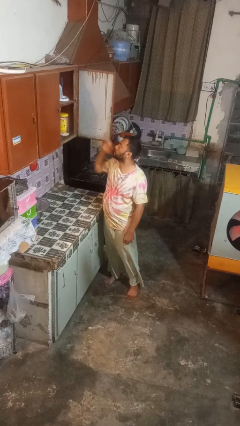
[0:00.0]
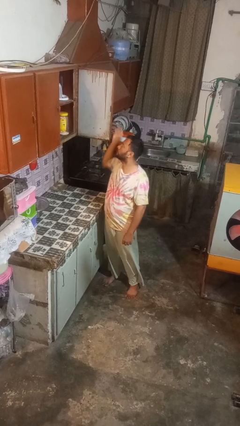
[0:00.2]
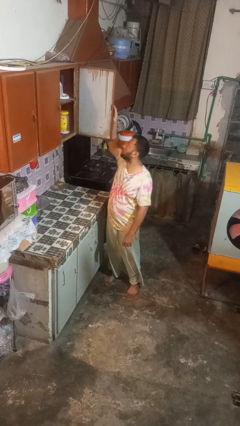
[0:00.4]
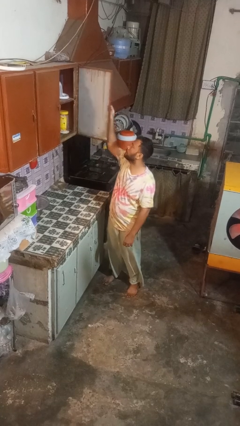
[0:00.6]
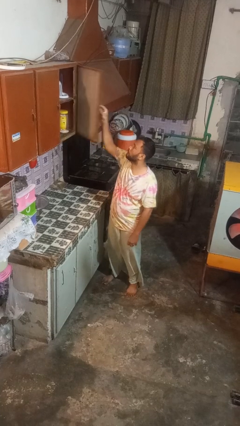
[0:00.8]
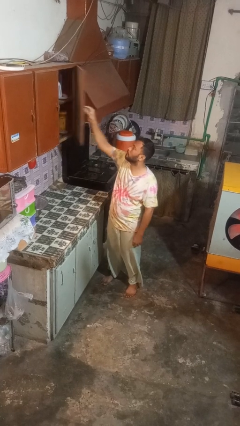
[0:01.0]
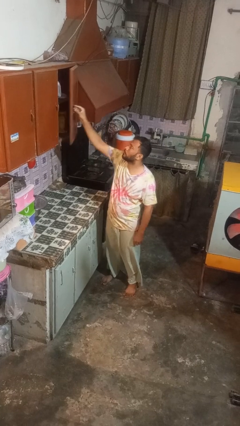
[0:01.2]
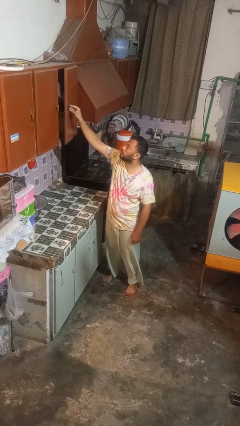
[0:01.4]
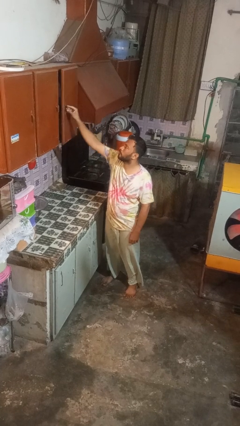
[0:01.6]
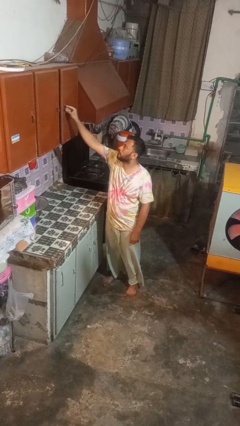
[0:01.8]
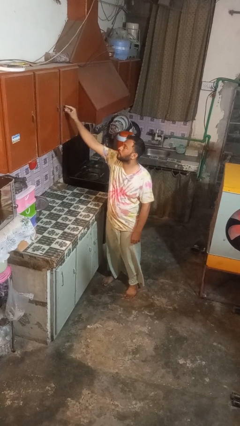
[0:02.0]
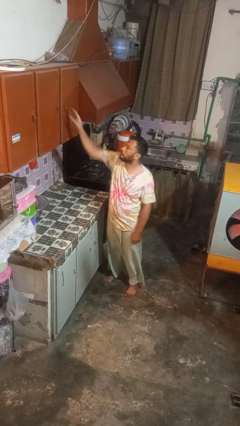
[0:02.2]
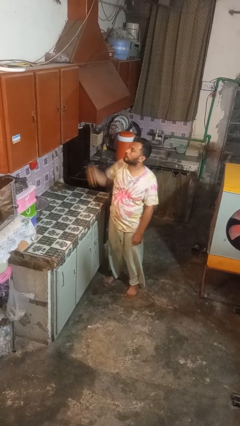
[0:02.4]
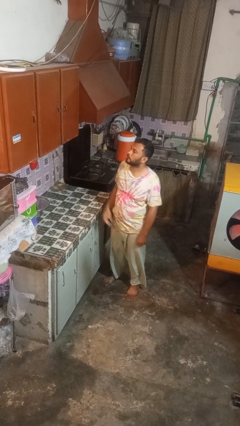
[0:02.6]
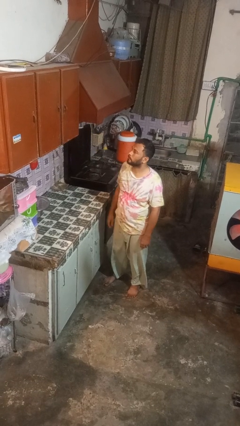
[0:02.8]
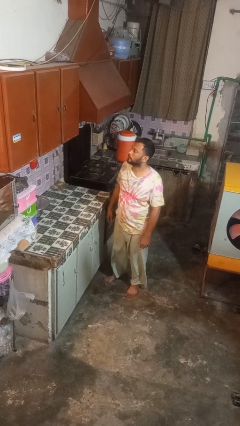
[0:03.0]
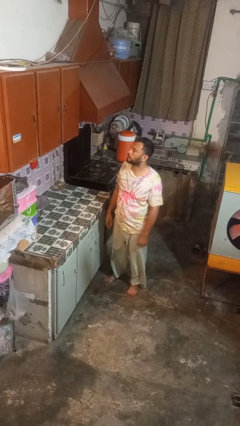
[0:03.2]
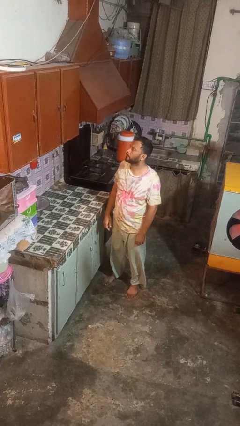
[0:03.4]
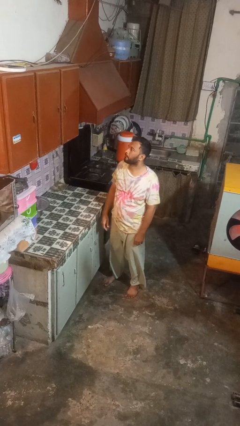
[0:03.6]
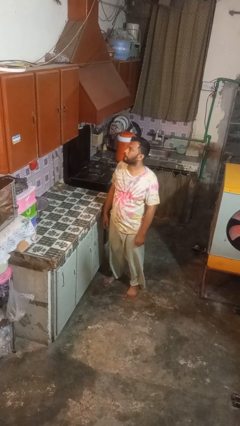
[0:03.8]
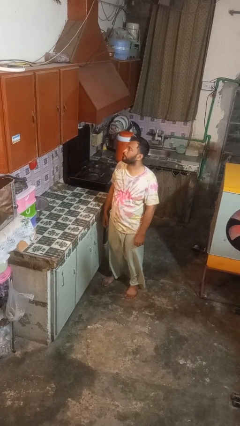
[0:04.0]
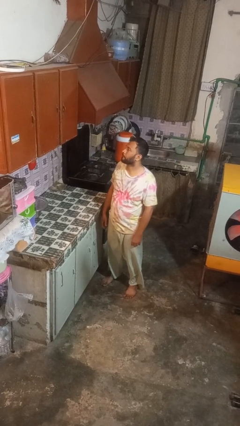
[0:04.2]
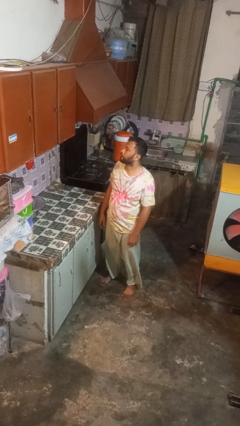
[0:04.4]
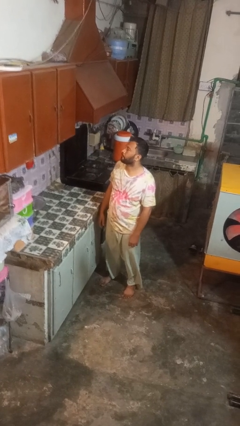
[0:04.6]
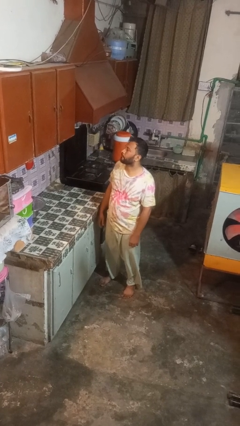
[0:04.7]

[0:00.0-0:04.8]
person closes cabinet

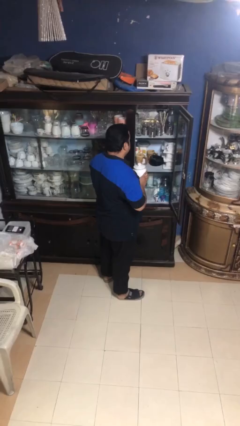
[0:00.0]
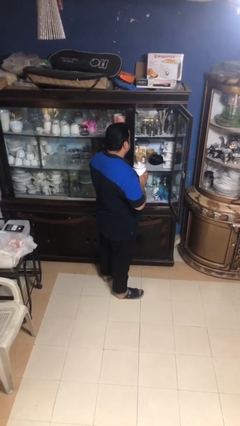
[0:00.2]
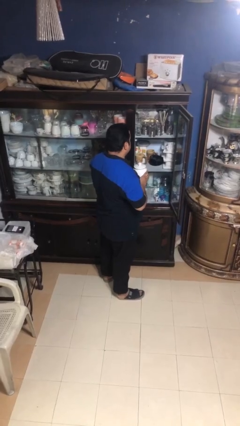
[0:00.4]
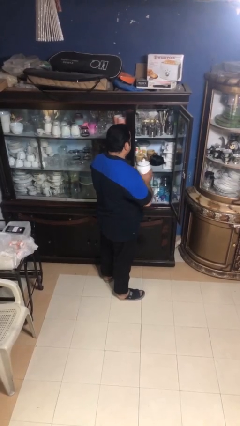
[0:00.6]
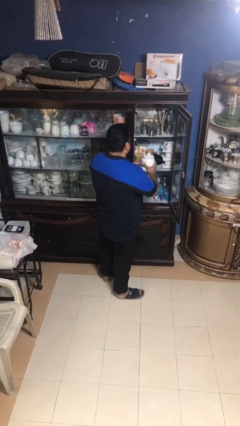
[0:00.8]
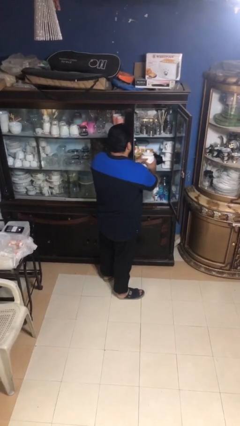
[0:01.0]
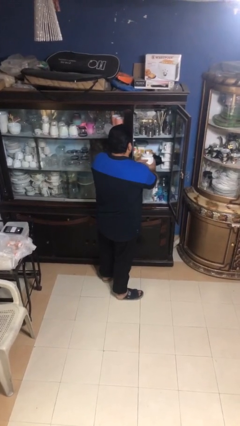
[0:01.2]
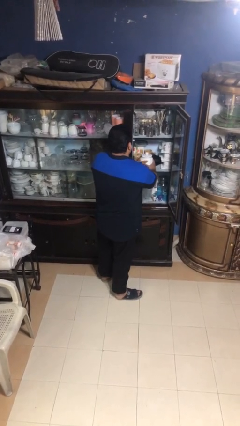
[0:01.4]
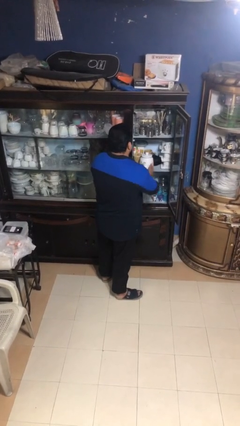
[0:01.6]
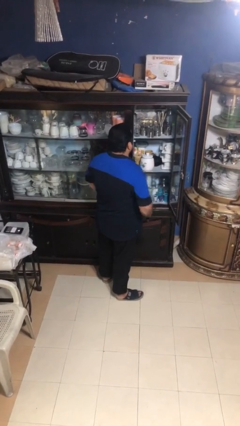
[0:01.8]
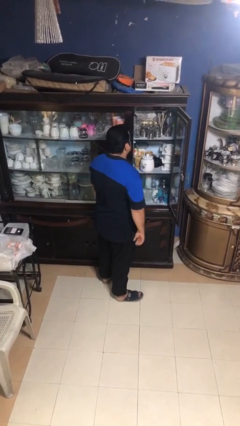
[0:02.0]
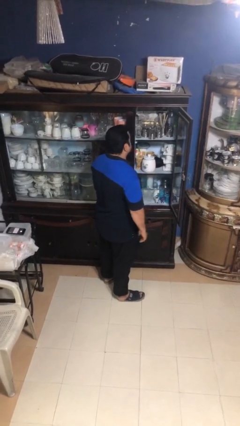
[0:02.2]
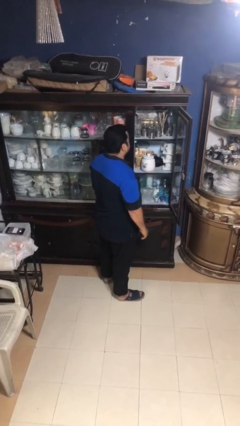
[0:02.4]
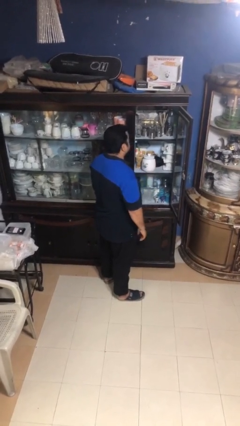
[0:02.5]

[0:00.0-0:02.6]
person puts down object into cabinet

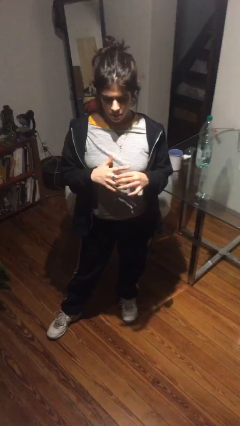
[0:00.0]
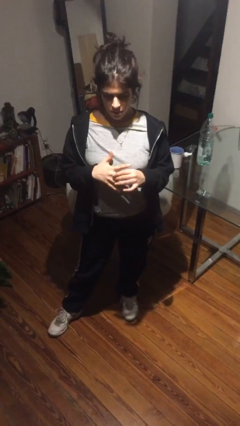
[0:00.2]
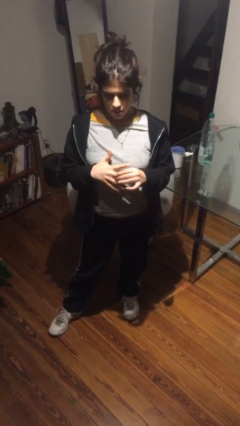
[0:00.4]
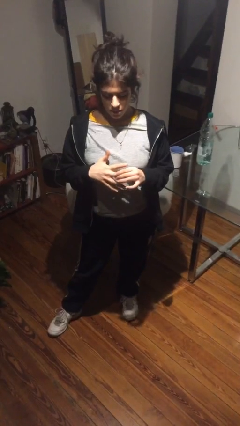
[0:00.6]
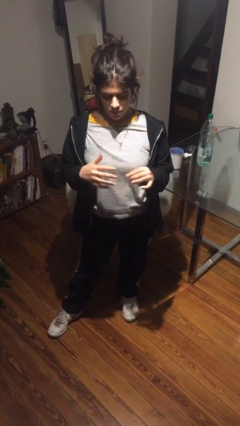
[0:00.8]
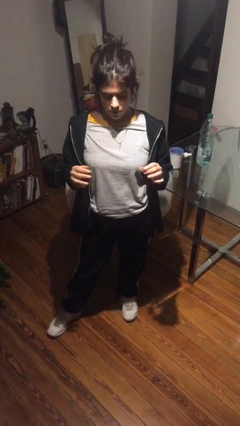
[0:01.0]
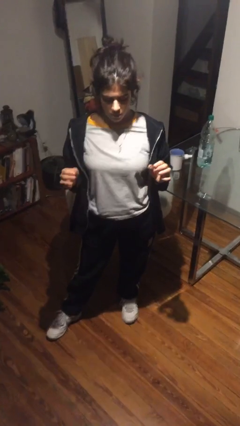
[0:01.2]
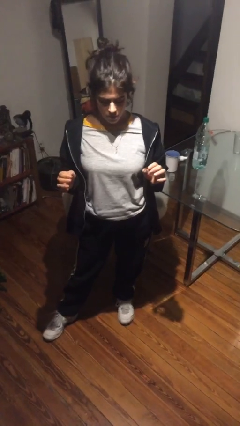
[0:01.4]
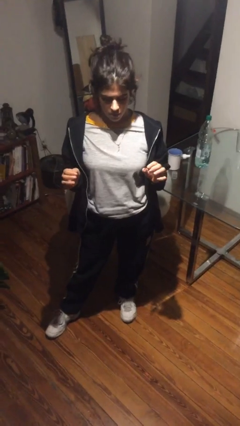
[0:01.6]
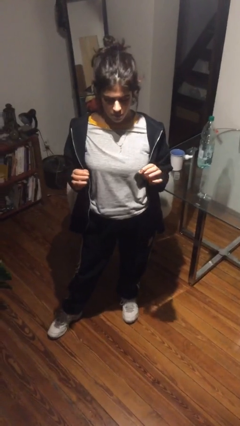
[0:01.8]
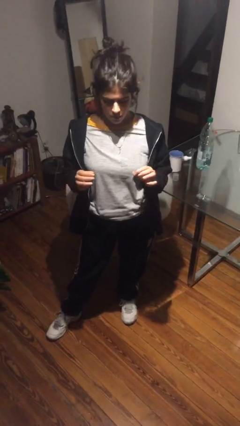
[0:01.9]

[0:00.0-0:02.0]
person takes off ring

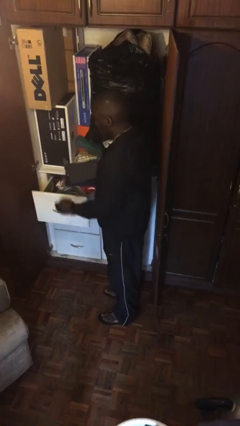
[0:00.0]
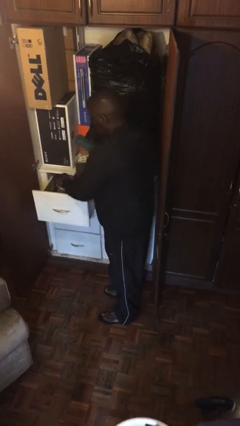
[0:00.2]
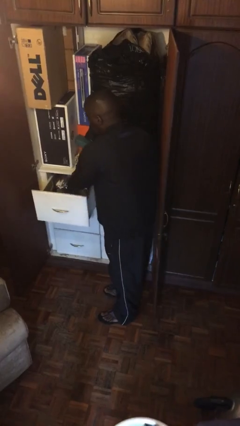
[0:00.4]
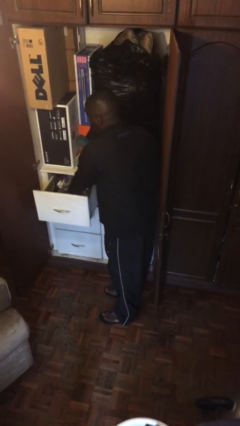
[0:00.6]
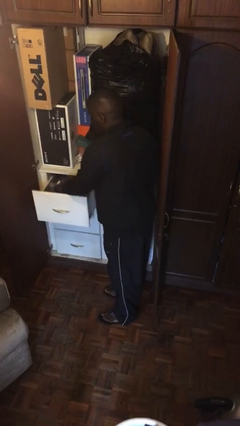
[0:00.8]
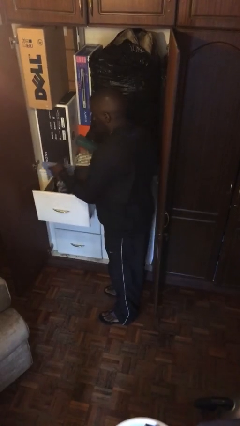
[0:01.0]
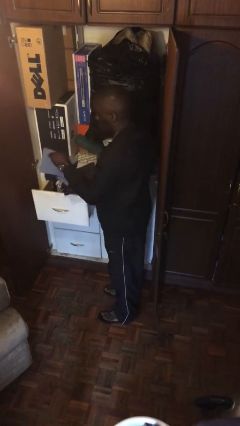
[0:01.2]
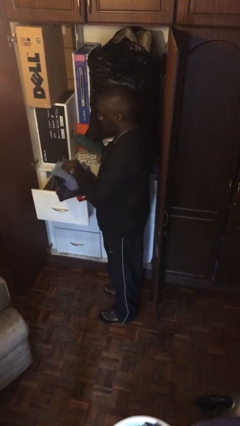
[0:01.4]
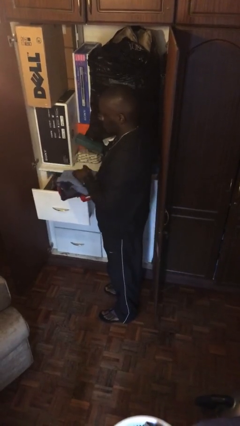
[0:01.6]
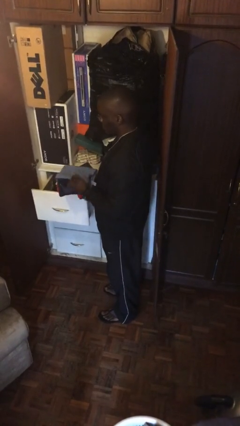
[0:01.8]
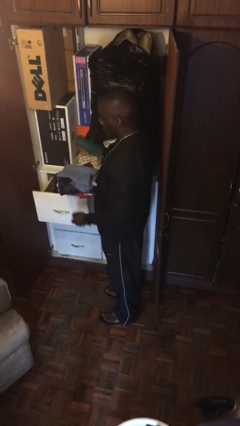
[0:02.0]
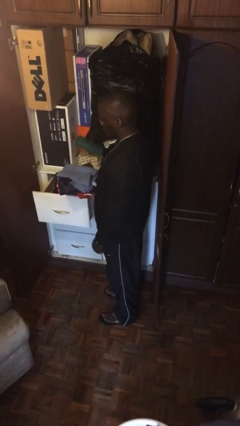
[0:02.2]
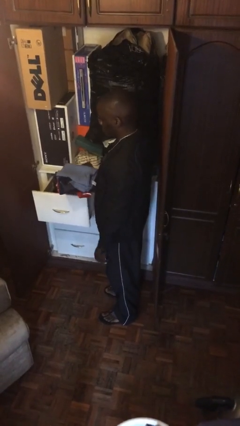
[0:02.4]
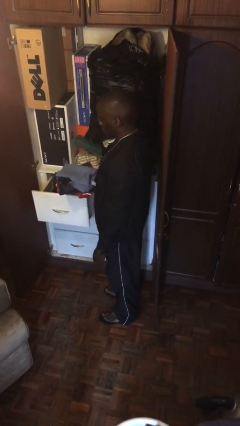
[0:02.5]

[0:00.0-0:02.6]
person takes clothes from dresser

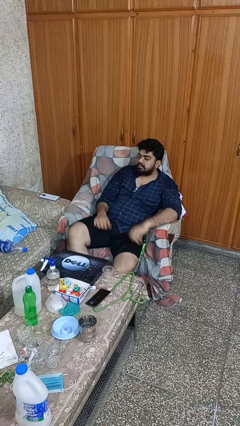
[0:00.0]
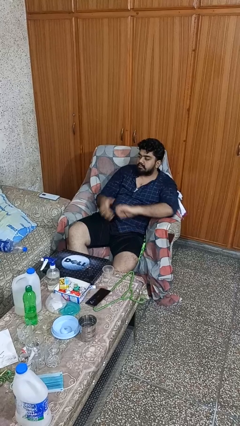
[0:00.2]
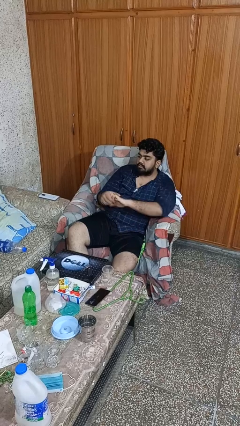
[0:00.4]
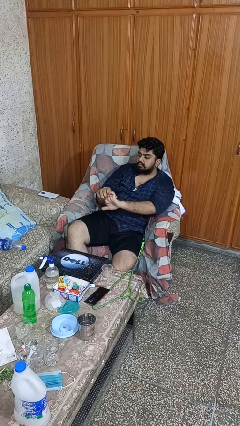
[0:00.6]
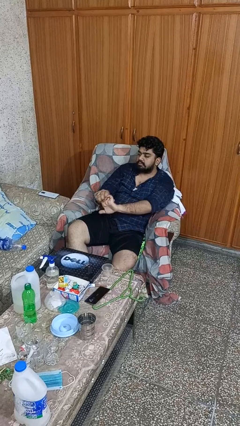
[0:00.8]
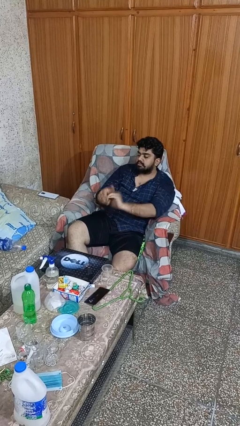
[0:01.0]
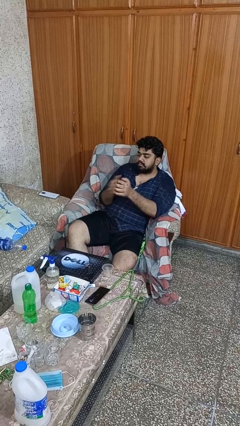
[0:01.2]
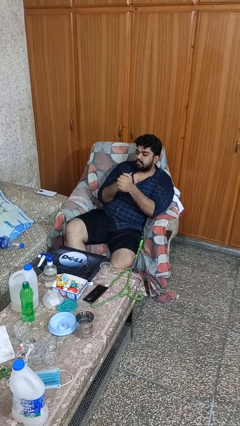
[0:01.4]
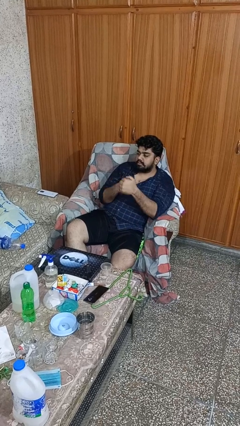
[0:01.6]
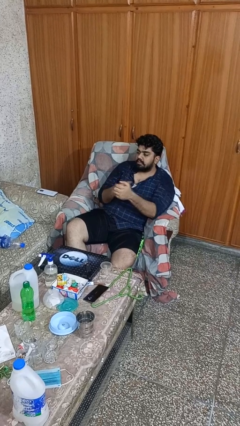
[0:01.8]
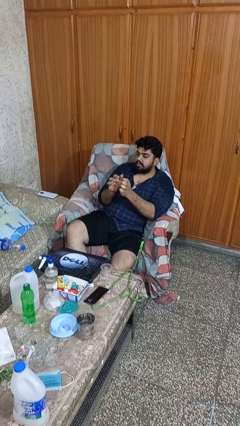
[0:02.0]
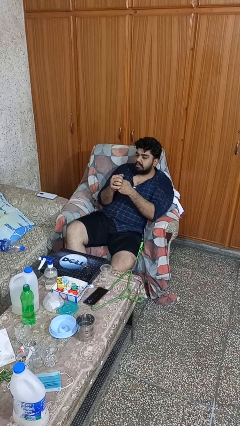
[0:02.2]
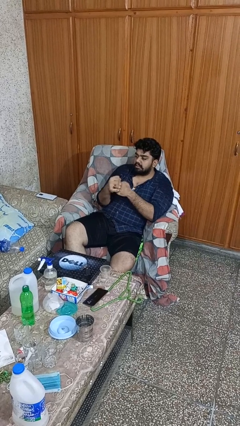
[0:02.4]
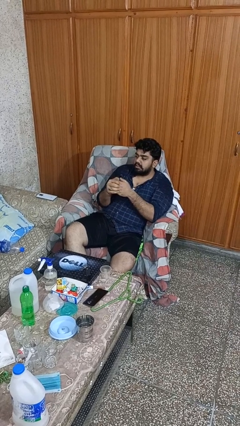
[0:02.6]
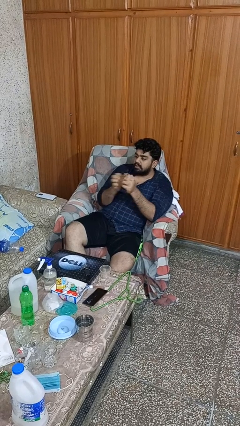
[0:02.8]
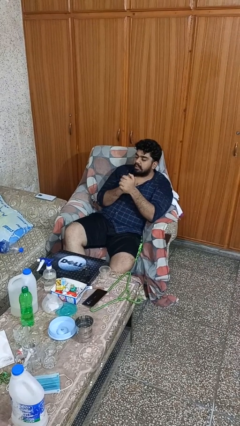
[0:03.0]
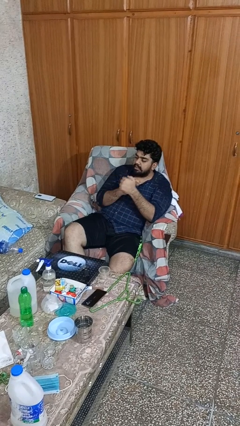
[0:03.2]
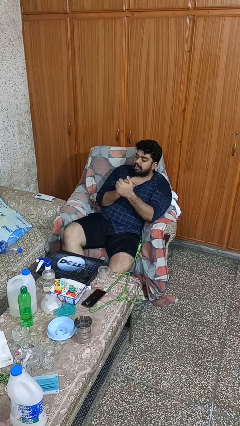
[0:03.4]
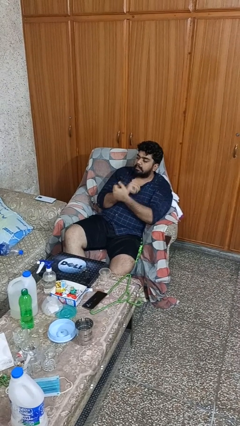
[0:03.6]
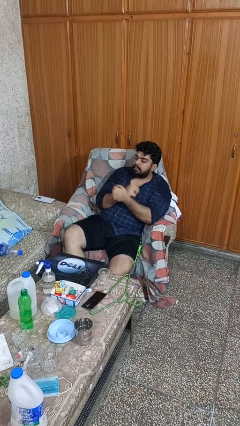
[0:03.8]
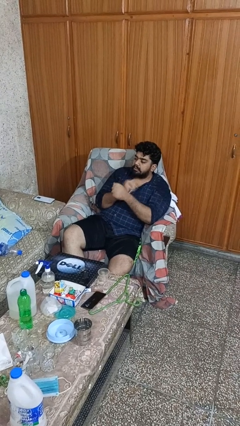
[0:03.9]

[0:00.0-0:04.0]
person cracks knuckles

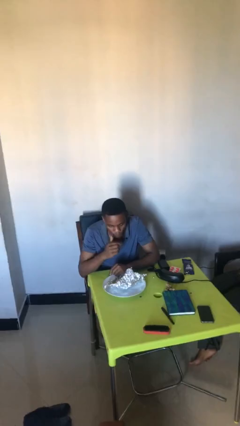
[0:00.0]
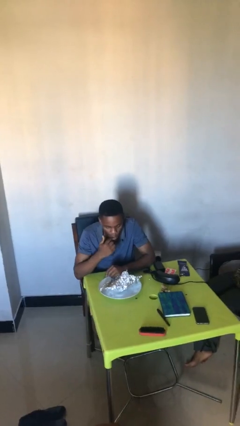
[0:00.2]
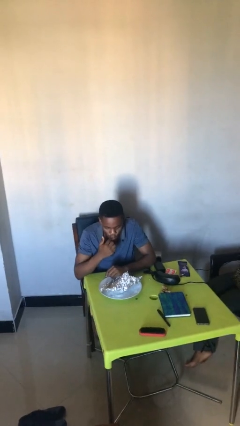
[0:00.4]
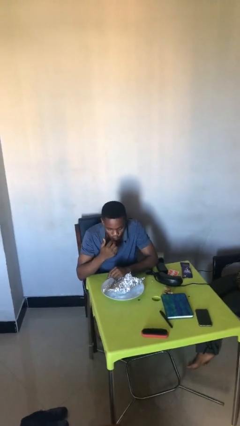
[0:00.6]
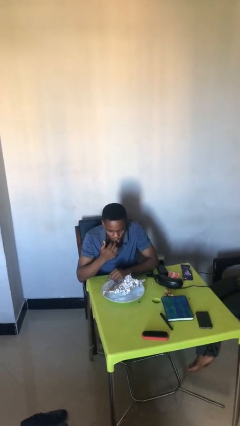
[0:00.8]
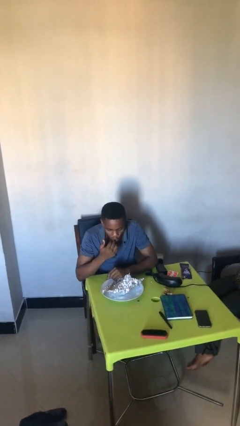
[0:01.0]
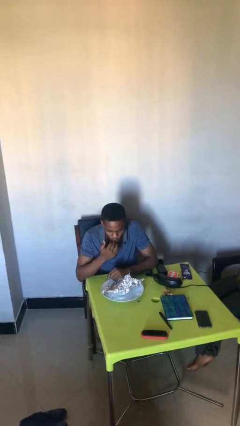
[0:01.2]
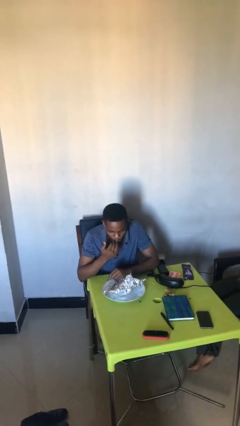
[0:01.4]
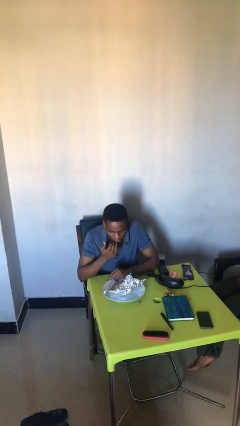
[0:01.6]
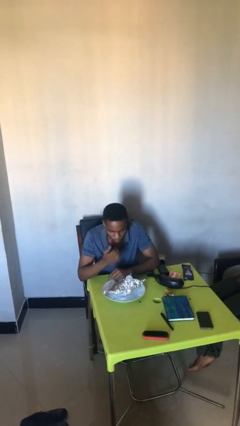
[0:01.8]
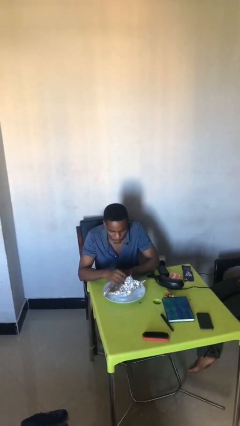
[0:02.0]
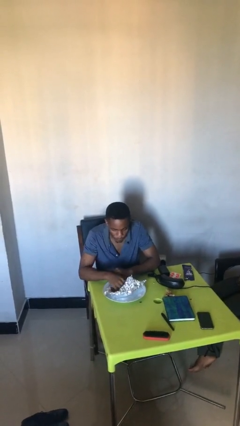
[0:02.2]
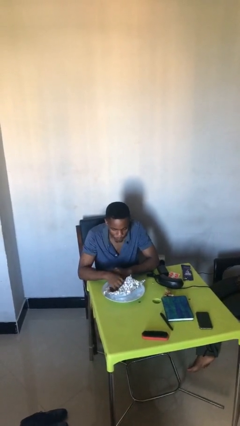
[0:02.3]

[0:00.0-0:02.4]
person licks fingers
